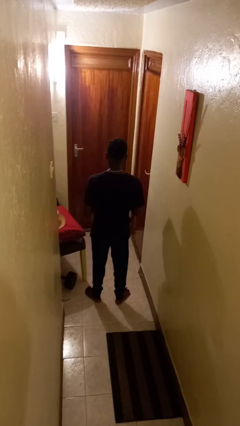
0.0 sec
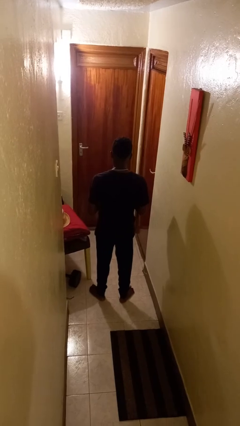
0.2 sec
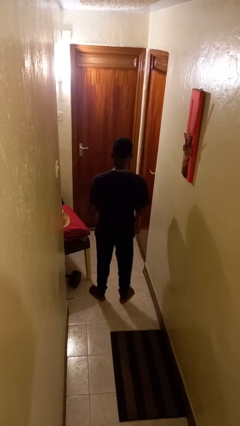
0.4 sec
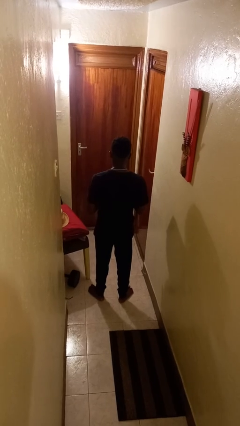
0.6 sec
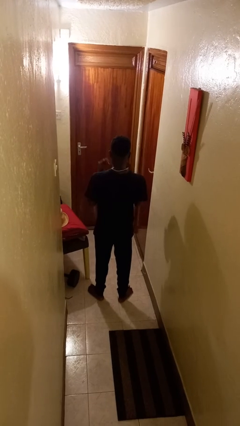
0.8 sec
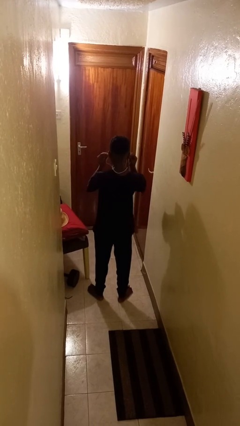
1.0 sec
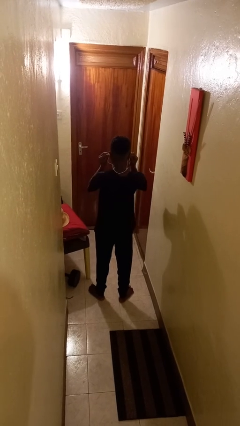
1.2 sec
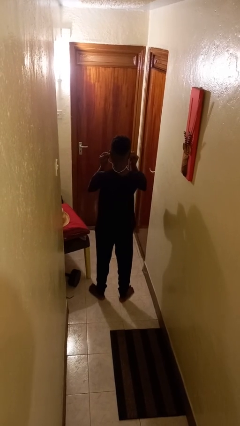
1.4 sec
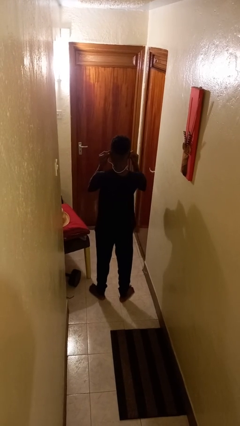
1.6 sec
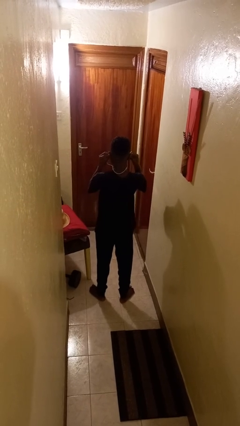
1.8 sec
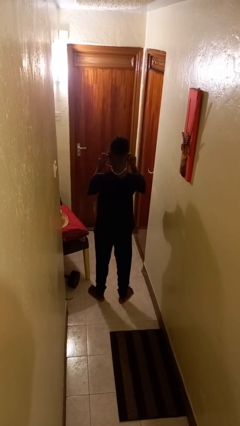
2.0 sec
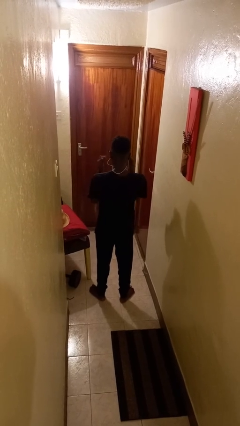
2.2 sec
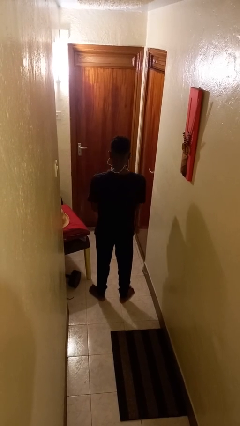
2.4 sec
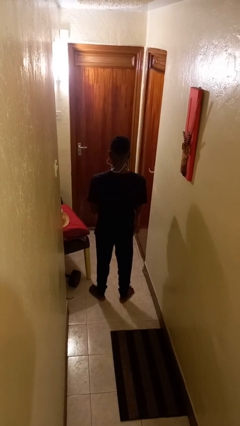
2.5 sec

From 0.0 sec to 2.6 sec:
person puts on headphones

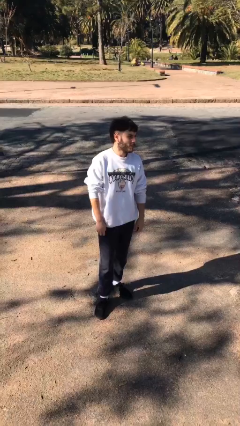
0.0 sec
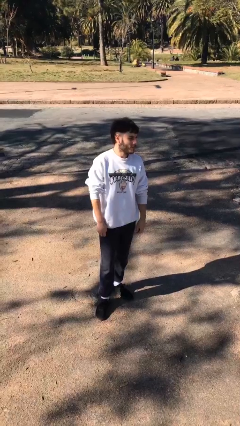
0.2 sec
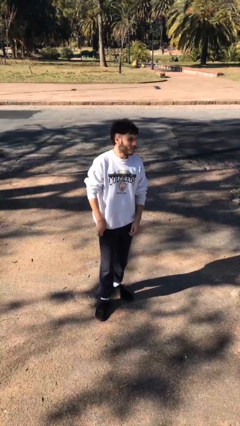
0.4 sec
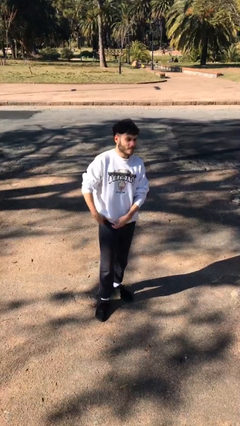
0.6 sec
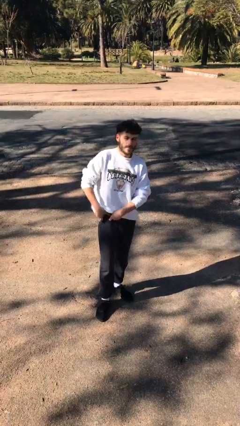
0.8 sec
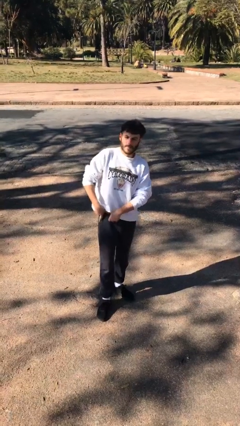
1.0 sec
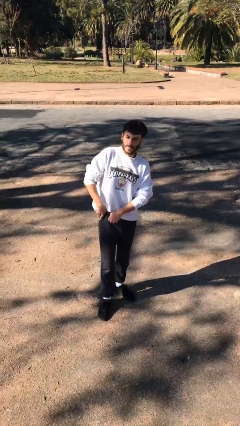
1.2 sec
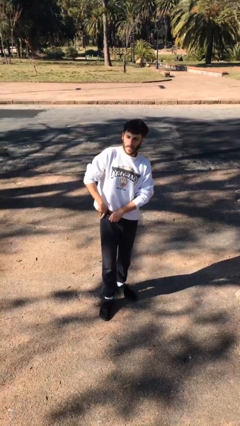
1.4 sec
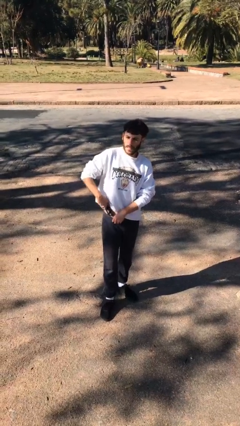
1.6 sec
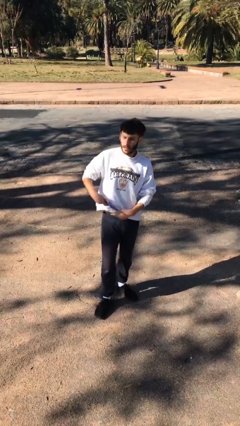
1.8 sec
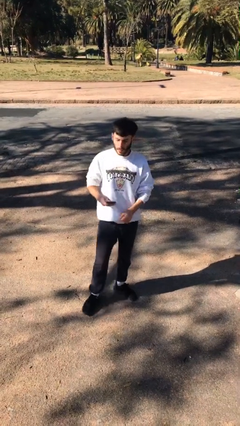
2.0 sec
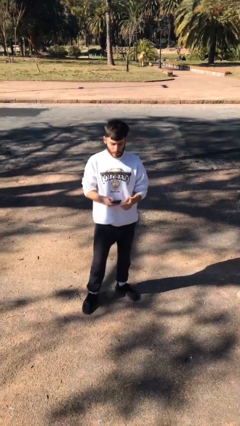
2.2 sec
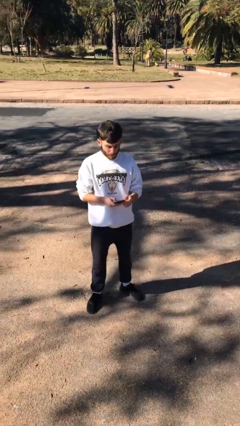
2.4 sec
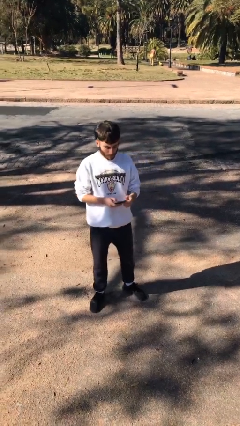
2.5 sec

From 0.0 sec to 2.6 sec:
person takes phone from pocket

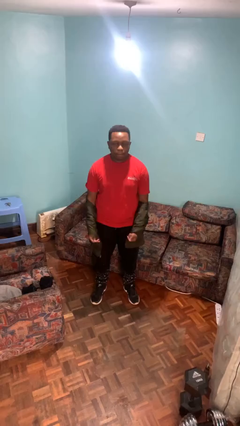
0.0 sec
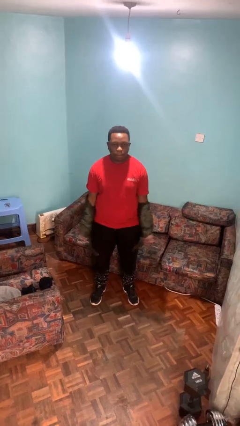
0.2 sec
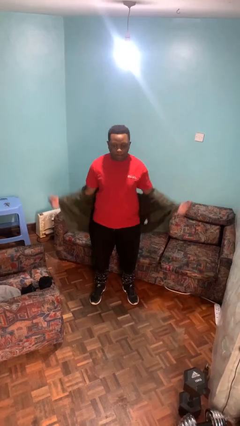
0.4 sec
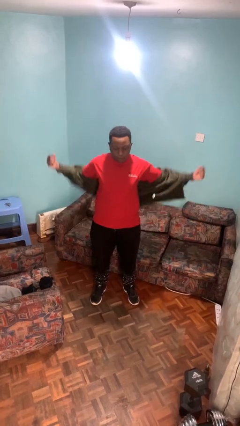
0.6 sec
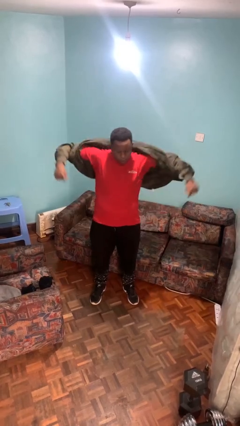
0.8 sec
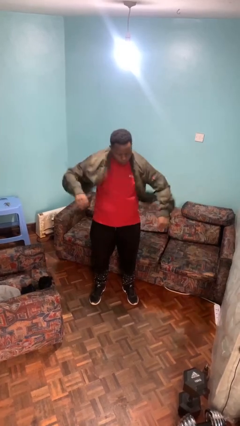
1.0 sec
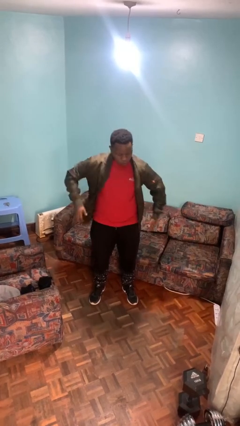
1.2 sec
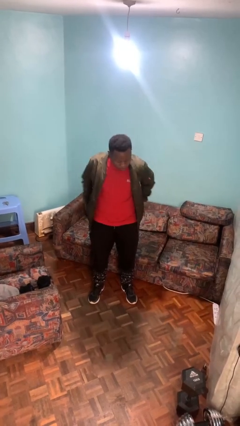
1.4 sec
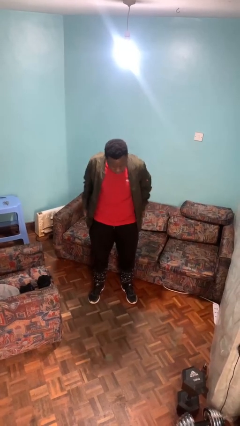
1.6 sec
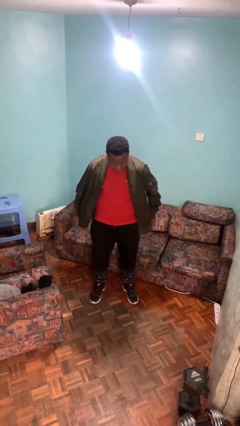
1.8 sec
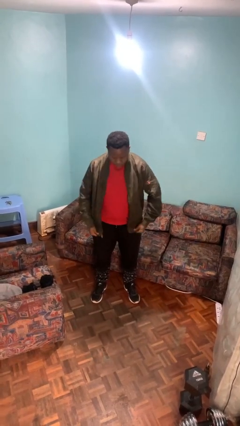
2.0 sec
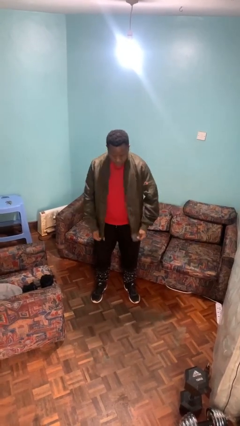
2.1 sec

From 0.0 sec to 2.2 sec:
person puts on jacket

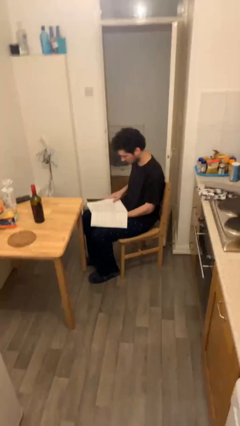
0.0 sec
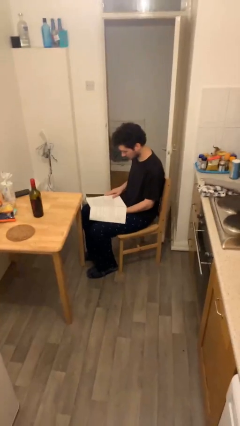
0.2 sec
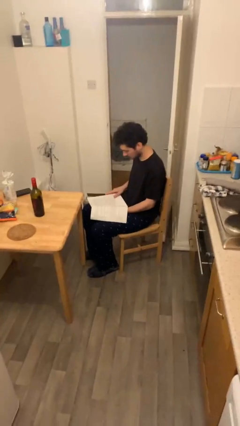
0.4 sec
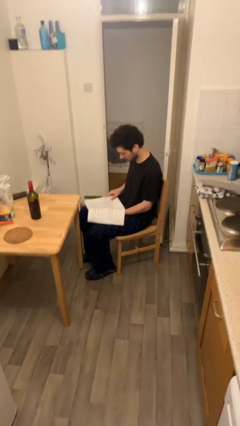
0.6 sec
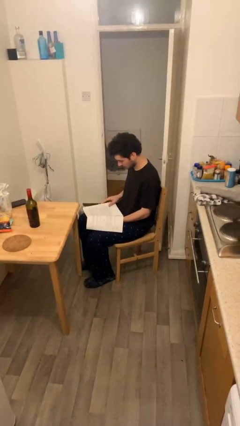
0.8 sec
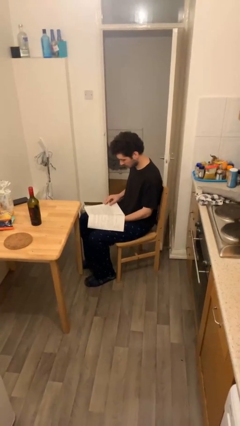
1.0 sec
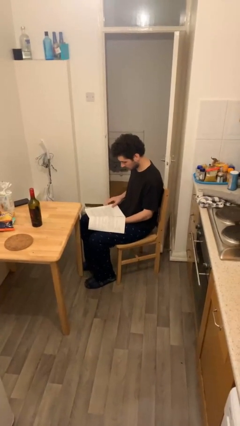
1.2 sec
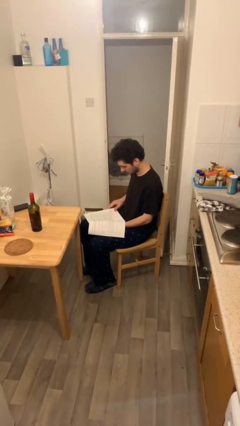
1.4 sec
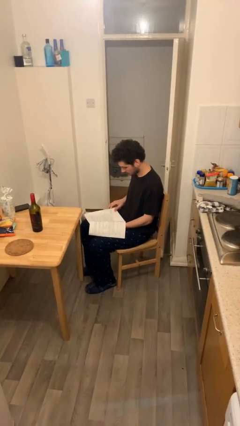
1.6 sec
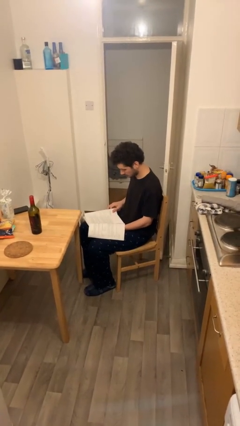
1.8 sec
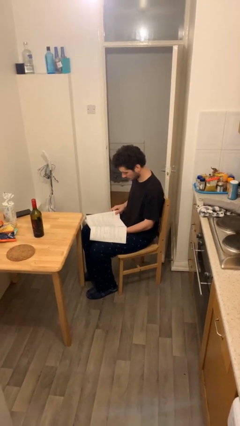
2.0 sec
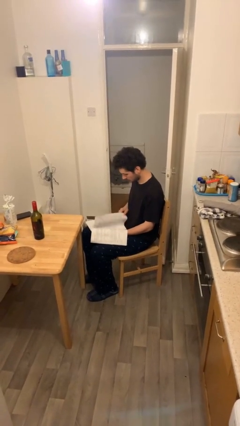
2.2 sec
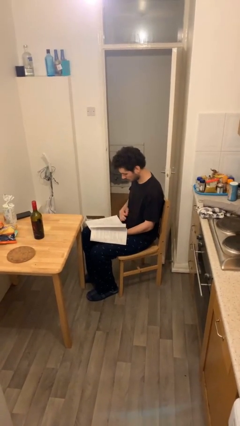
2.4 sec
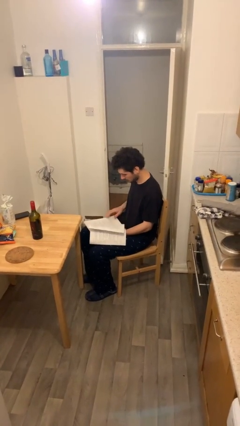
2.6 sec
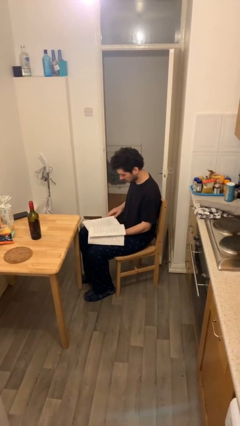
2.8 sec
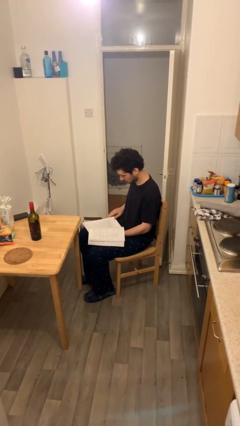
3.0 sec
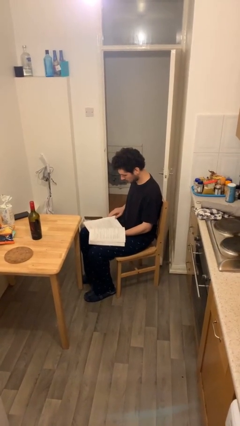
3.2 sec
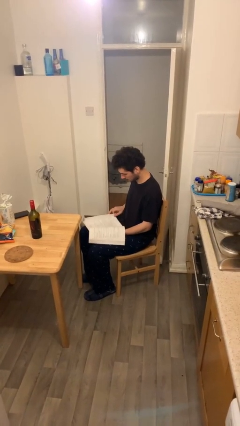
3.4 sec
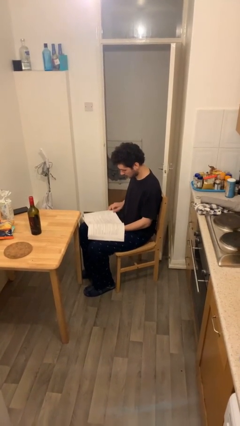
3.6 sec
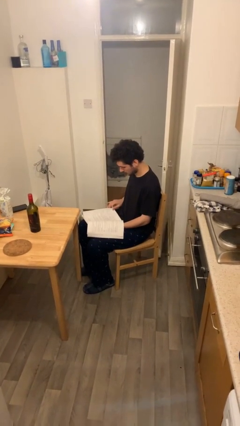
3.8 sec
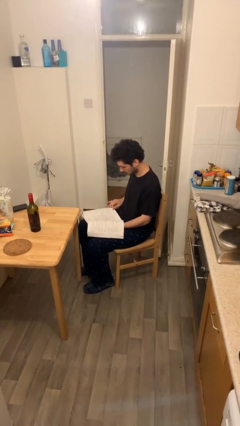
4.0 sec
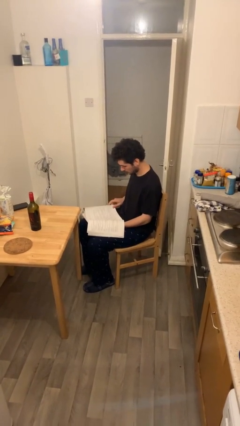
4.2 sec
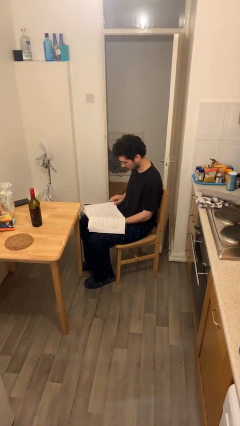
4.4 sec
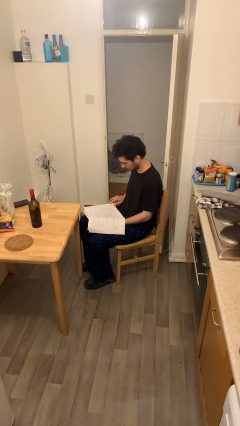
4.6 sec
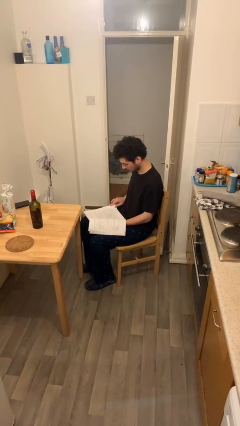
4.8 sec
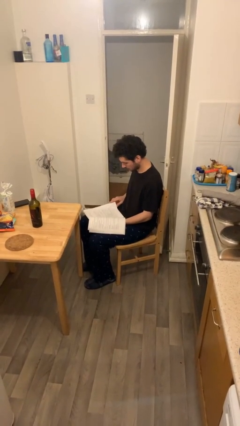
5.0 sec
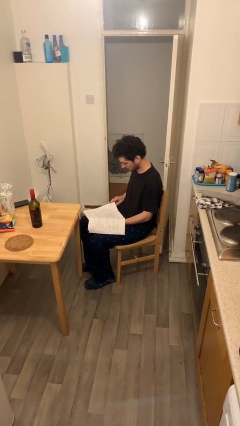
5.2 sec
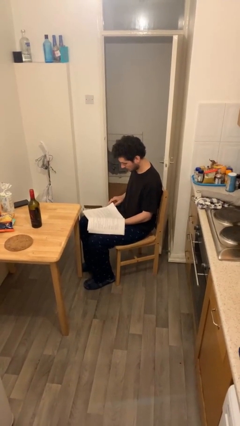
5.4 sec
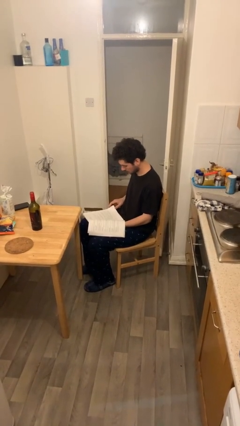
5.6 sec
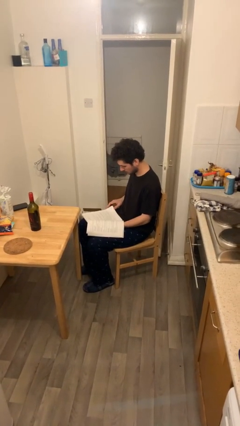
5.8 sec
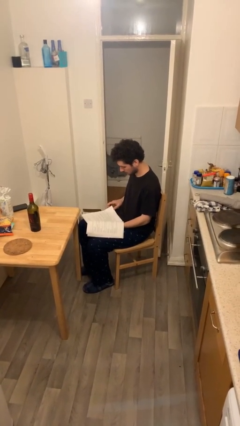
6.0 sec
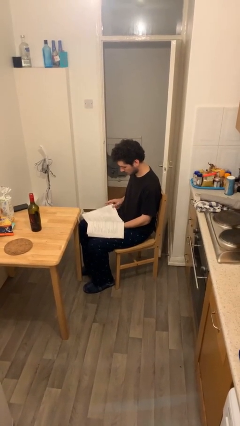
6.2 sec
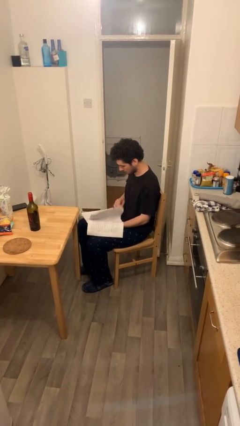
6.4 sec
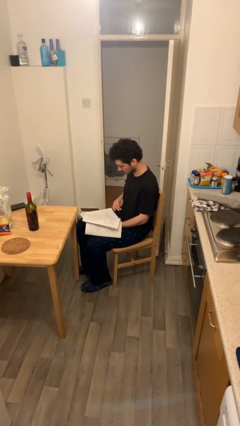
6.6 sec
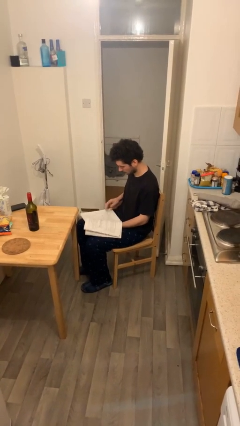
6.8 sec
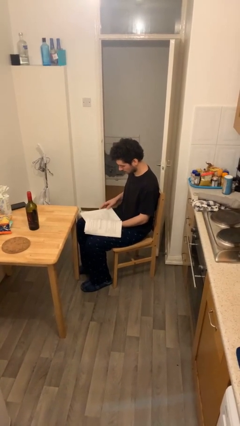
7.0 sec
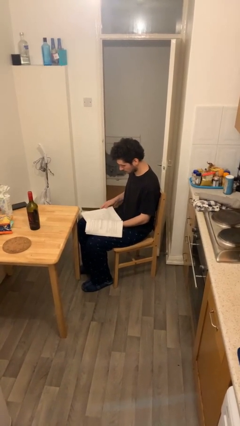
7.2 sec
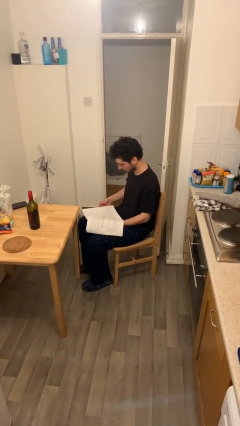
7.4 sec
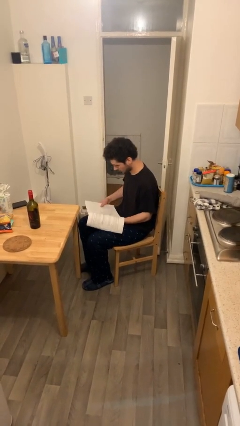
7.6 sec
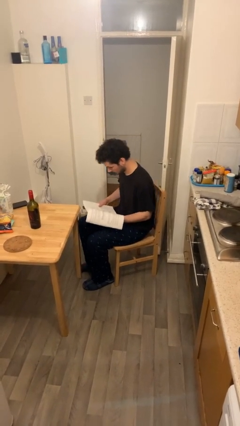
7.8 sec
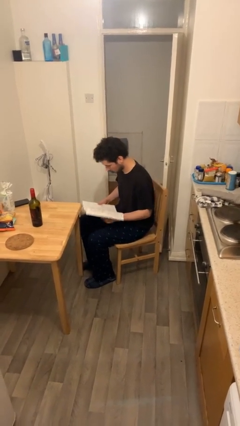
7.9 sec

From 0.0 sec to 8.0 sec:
person reads document

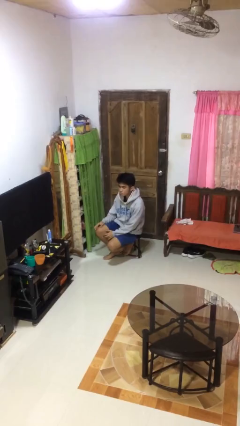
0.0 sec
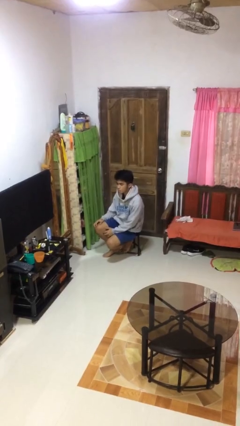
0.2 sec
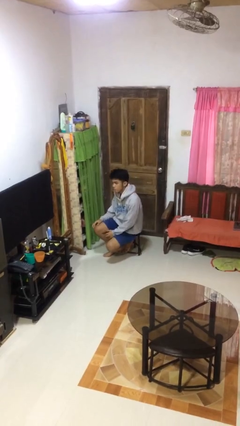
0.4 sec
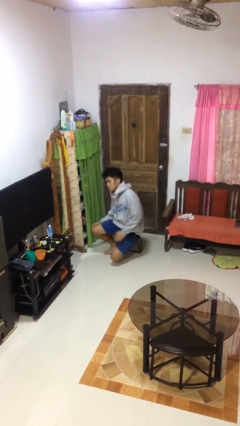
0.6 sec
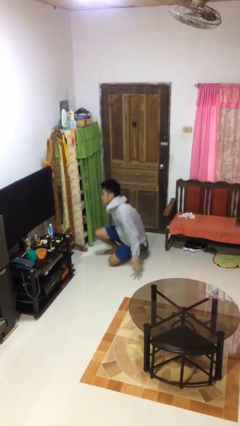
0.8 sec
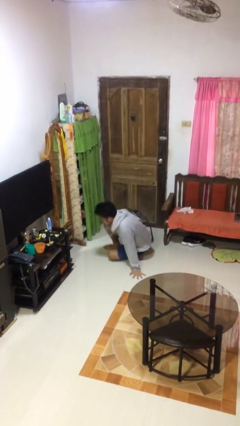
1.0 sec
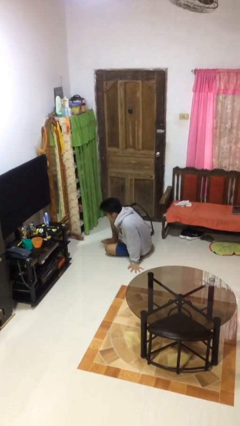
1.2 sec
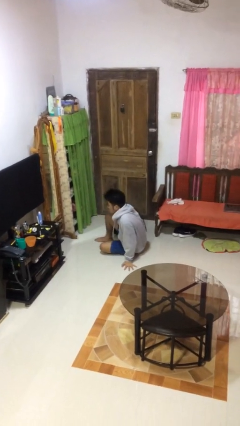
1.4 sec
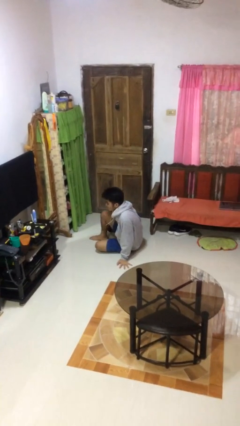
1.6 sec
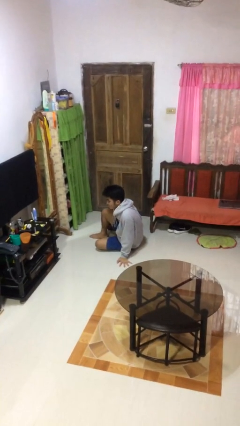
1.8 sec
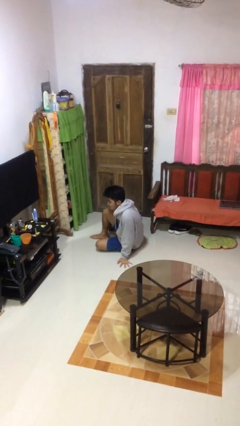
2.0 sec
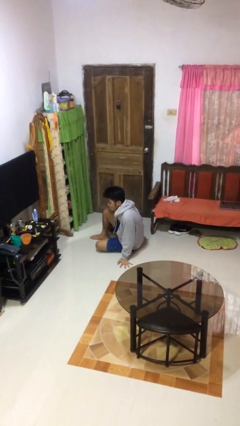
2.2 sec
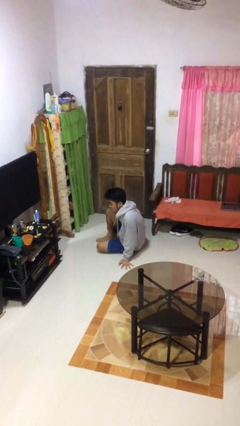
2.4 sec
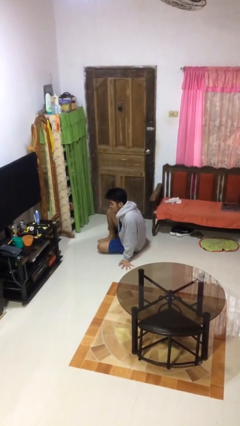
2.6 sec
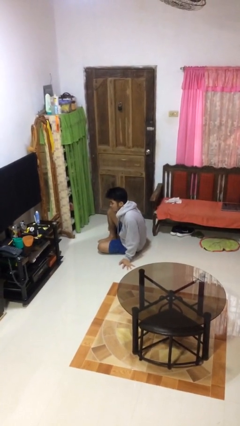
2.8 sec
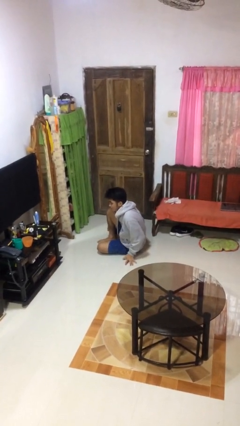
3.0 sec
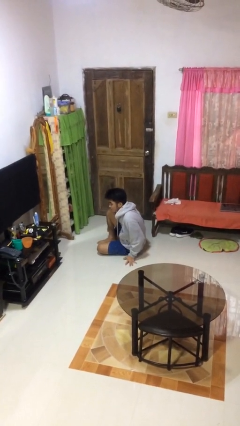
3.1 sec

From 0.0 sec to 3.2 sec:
person falls from chair
